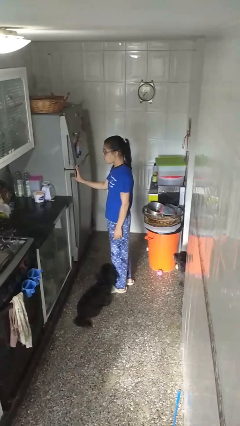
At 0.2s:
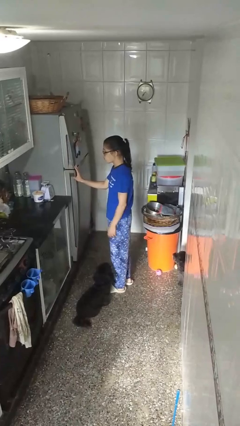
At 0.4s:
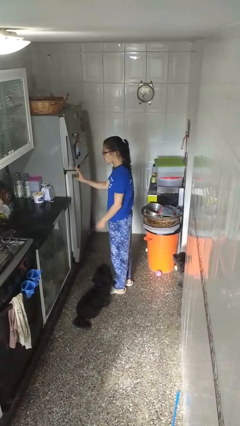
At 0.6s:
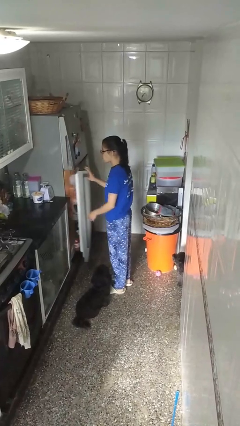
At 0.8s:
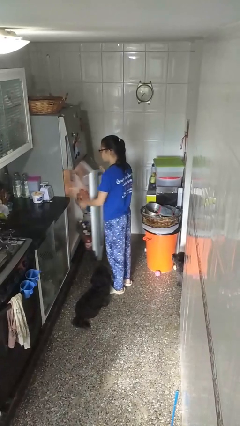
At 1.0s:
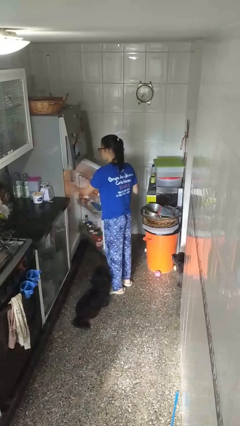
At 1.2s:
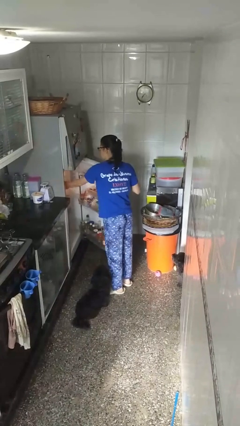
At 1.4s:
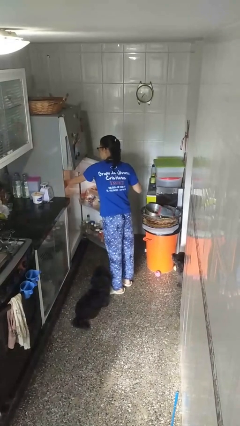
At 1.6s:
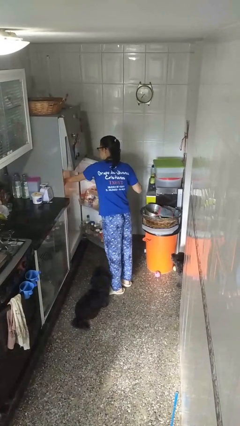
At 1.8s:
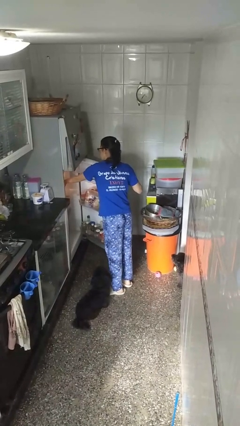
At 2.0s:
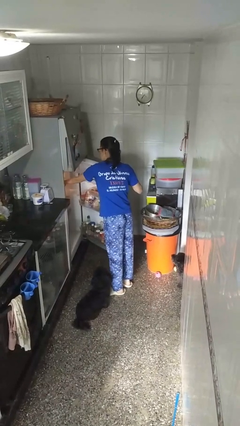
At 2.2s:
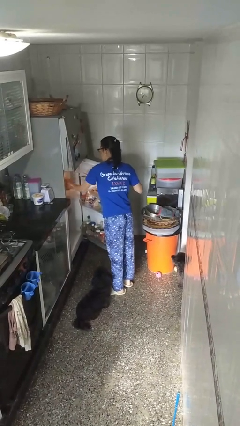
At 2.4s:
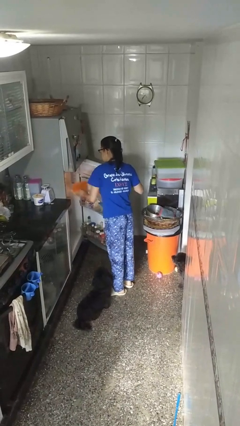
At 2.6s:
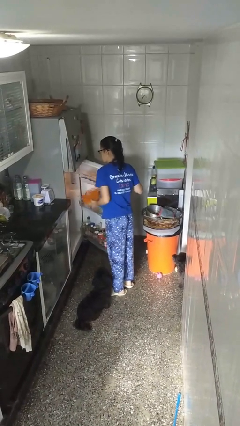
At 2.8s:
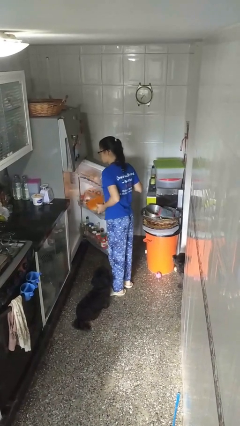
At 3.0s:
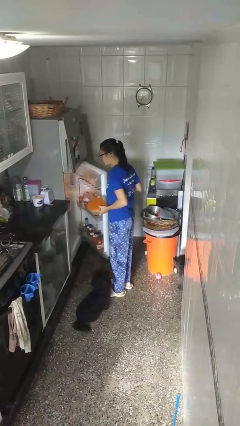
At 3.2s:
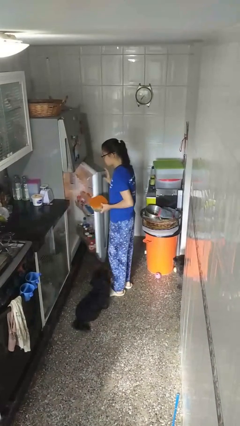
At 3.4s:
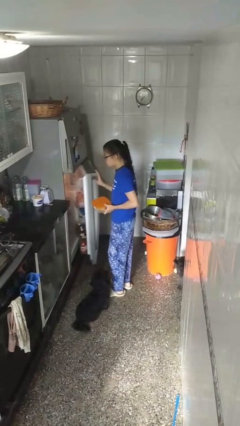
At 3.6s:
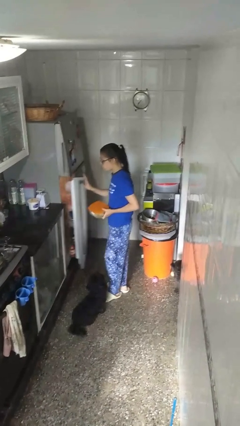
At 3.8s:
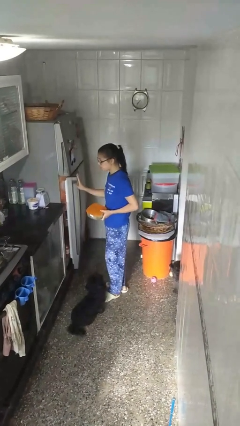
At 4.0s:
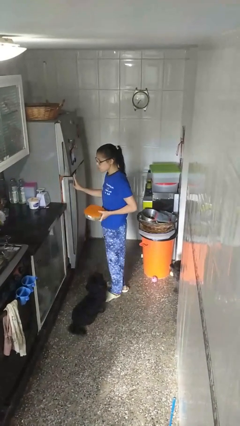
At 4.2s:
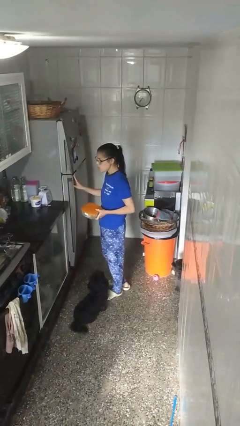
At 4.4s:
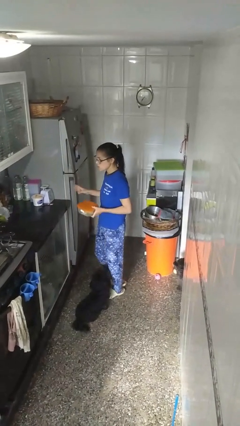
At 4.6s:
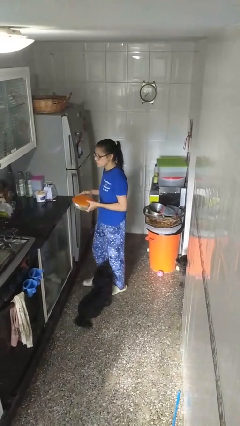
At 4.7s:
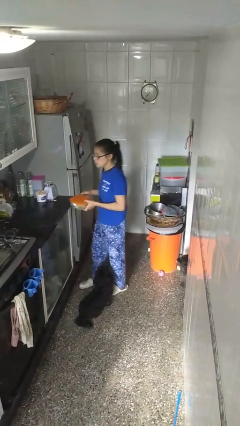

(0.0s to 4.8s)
person takes object from refrigerator

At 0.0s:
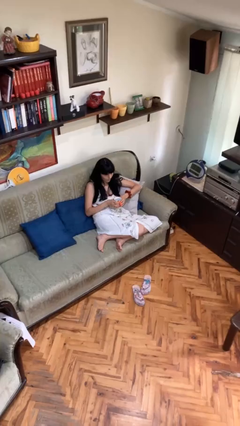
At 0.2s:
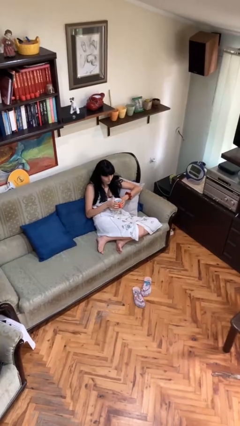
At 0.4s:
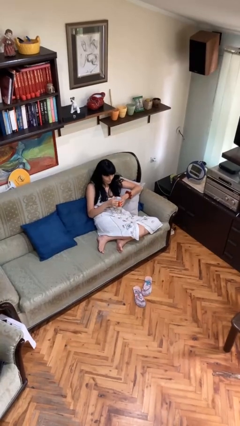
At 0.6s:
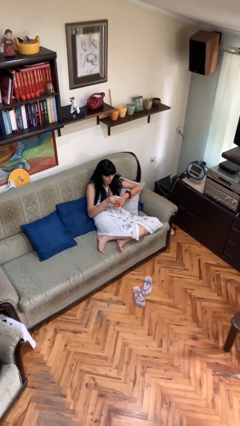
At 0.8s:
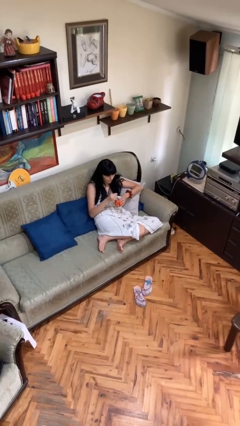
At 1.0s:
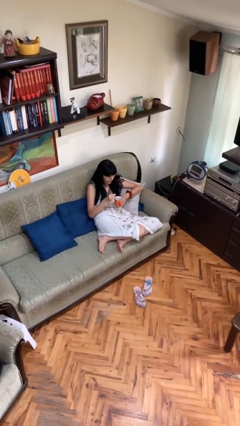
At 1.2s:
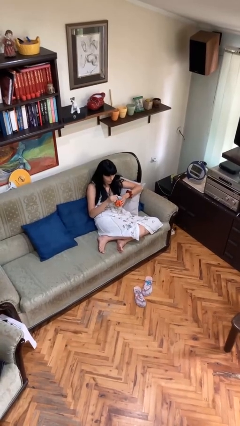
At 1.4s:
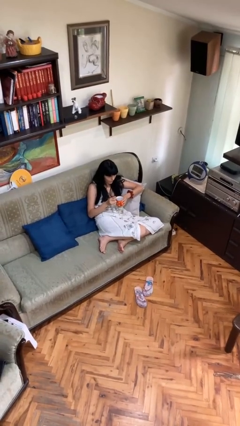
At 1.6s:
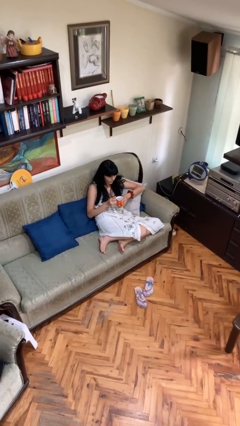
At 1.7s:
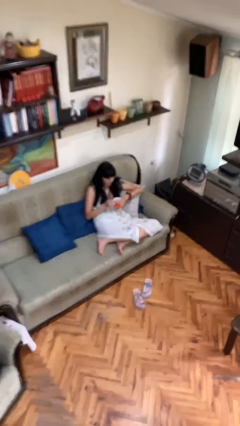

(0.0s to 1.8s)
person stirs mug

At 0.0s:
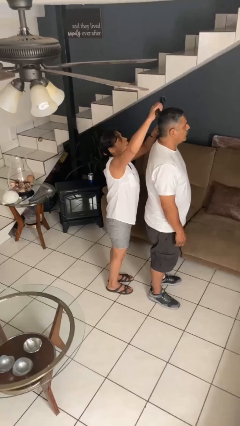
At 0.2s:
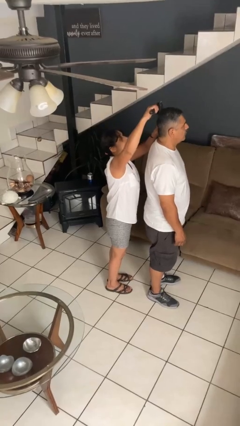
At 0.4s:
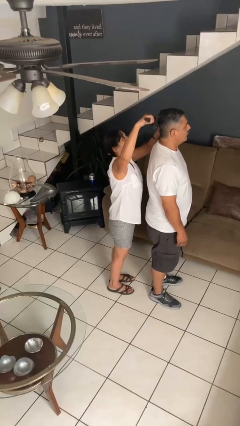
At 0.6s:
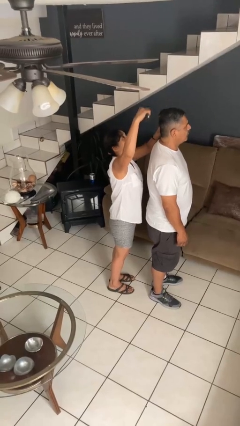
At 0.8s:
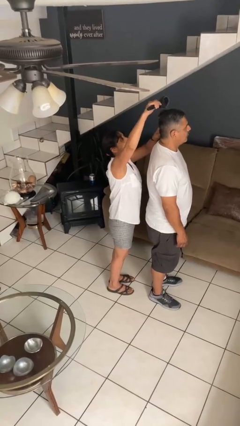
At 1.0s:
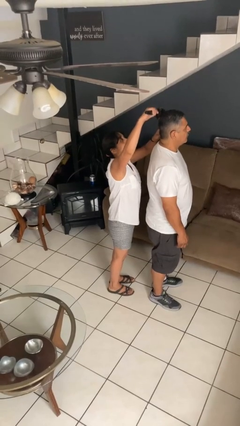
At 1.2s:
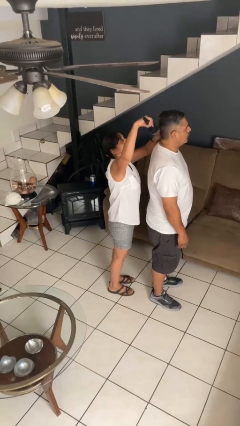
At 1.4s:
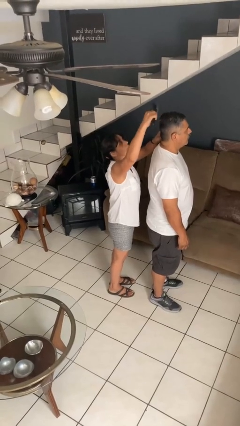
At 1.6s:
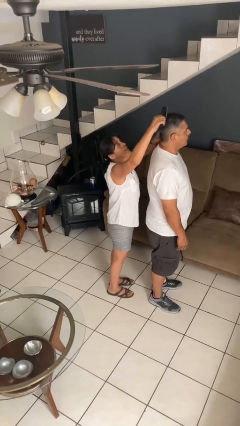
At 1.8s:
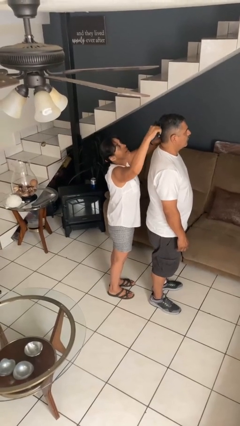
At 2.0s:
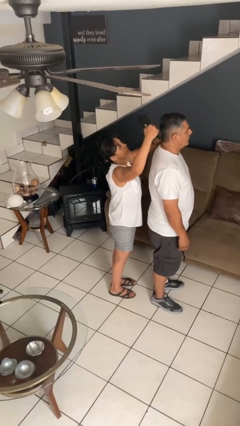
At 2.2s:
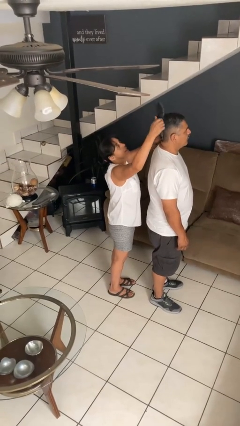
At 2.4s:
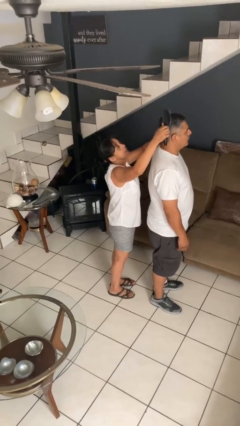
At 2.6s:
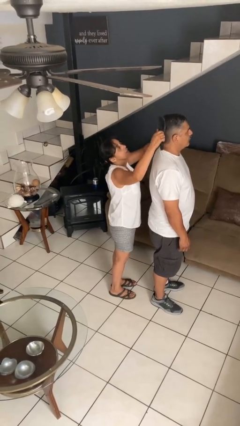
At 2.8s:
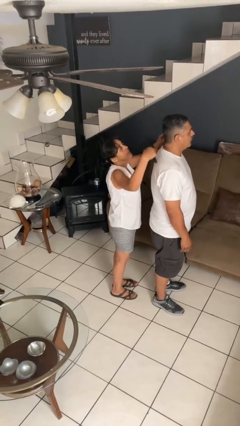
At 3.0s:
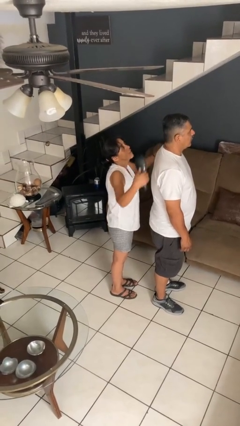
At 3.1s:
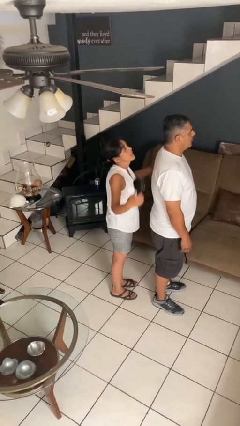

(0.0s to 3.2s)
person brushes hair of person

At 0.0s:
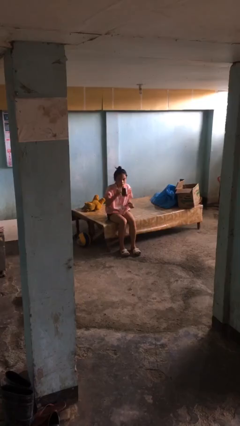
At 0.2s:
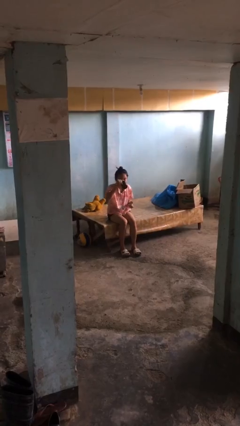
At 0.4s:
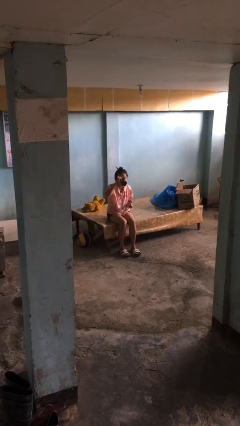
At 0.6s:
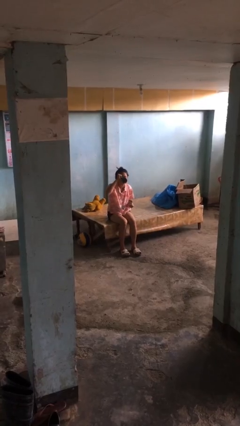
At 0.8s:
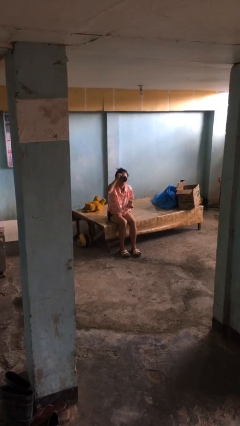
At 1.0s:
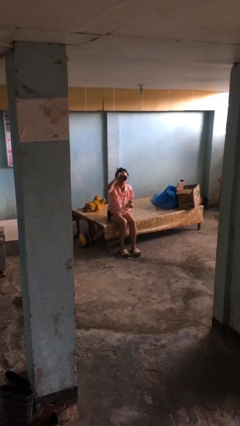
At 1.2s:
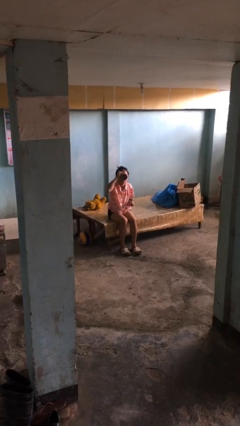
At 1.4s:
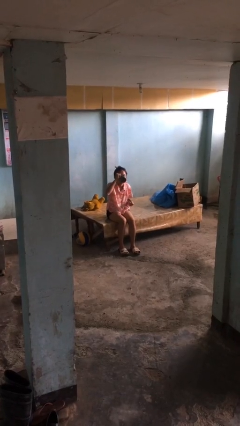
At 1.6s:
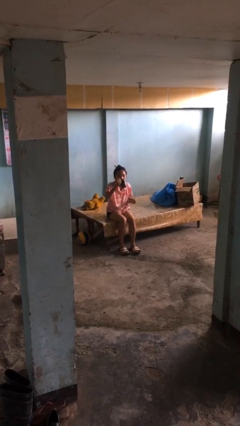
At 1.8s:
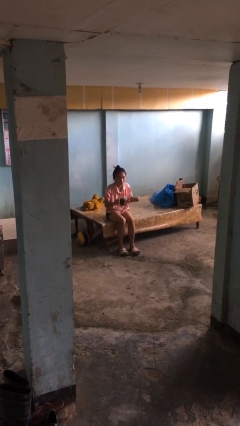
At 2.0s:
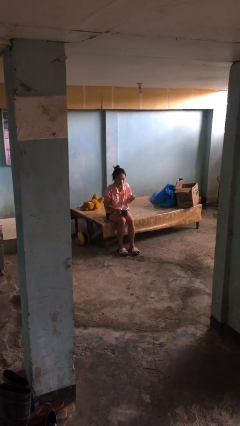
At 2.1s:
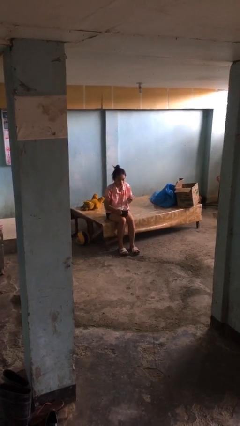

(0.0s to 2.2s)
person drinks from mug

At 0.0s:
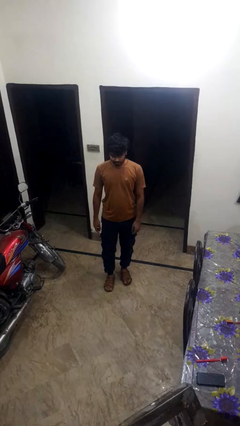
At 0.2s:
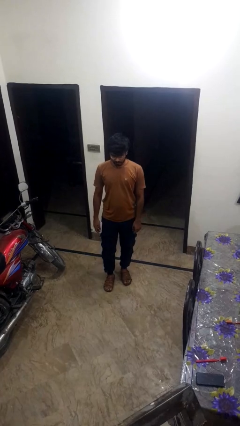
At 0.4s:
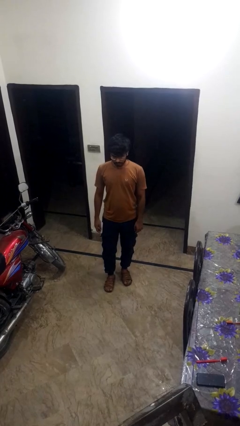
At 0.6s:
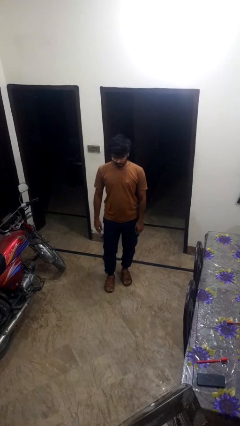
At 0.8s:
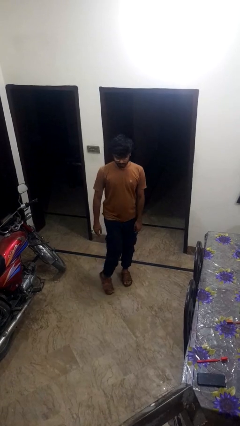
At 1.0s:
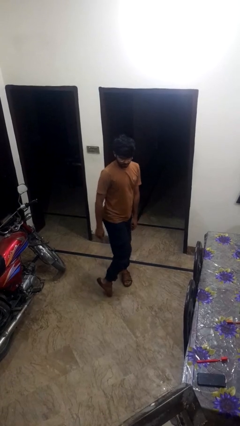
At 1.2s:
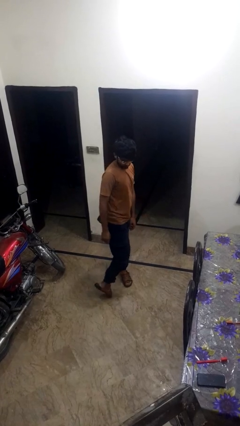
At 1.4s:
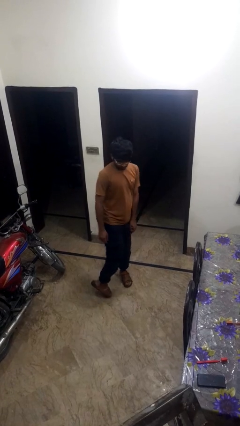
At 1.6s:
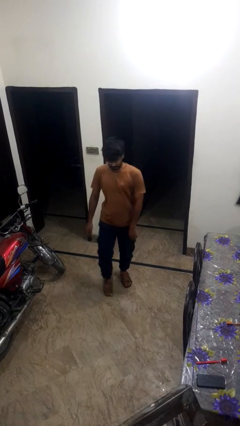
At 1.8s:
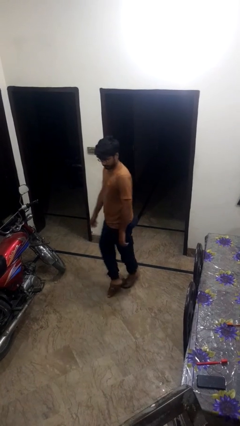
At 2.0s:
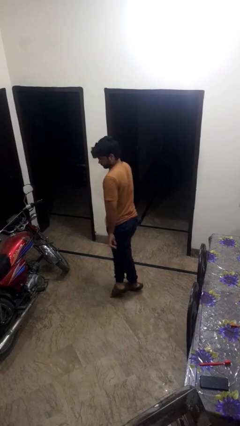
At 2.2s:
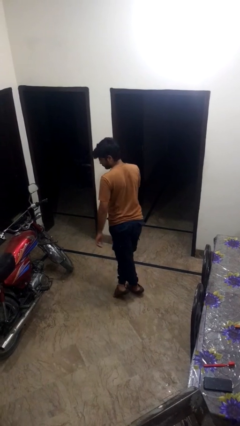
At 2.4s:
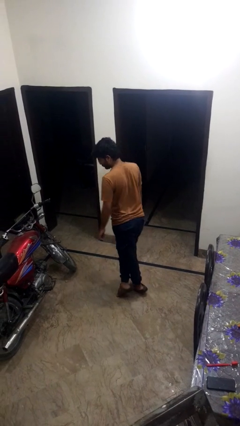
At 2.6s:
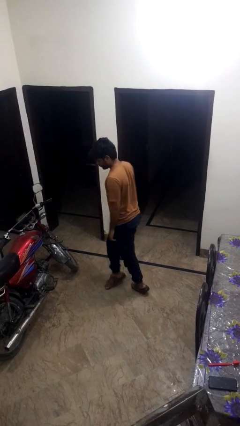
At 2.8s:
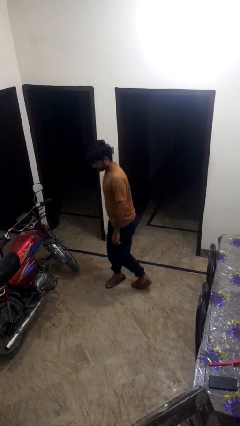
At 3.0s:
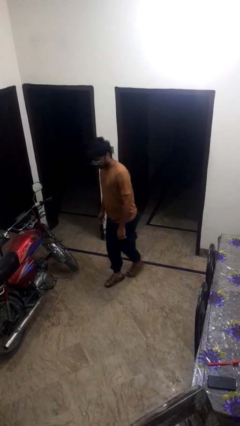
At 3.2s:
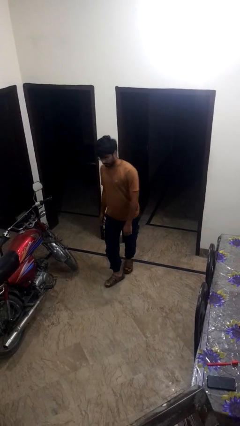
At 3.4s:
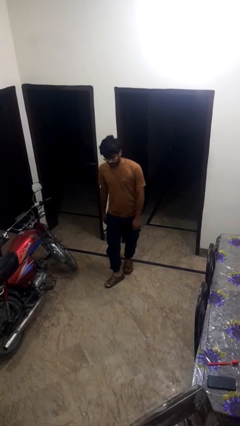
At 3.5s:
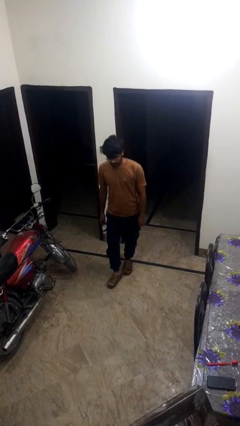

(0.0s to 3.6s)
person twirls

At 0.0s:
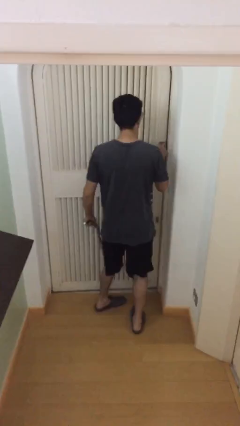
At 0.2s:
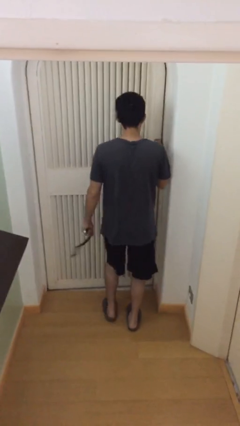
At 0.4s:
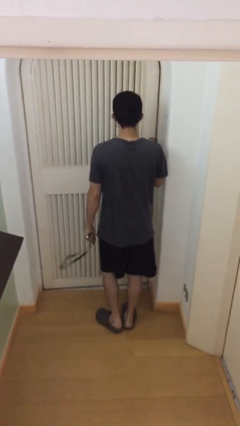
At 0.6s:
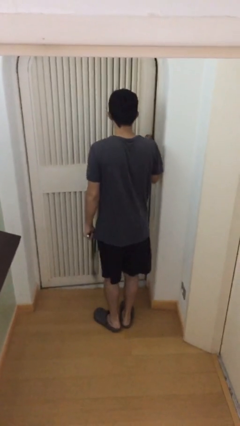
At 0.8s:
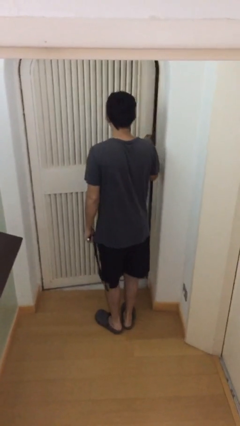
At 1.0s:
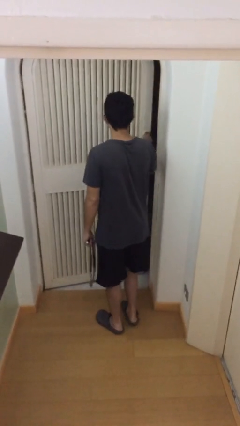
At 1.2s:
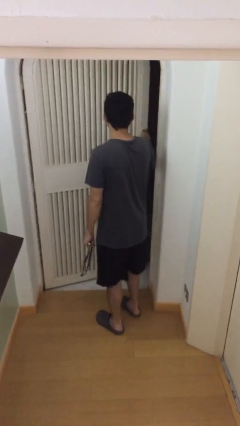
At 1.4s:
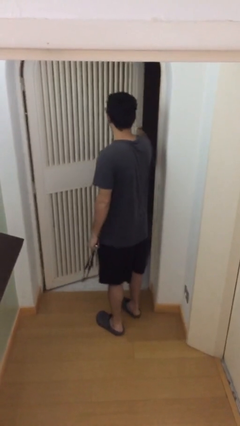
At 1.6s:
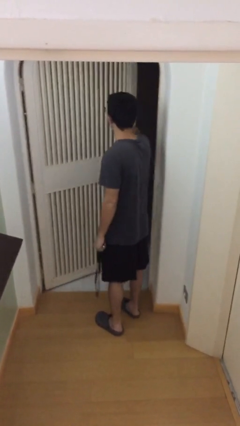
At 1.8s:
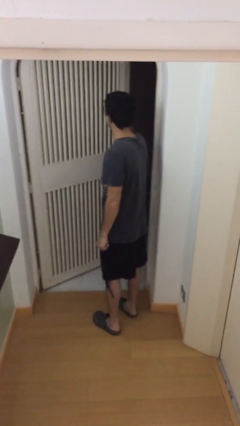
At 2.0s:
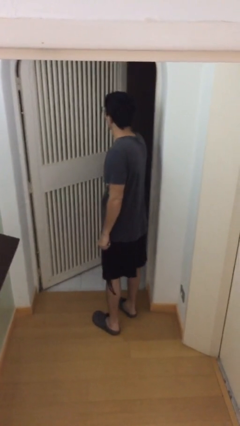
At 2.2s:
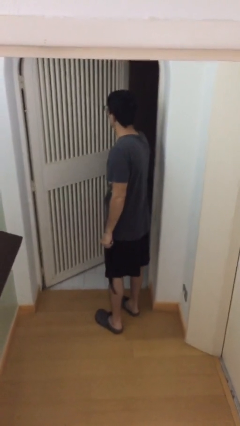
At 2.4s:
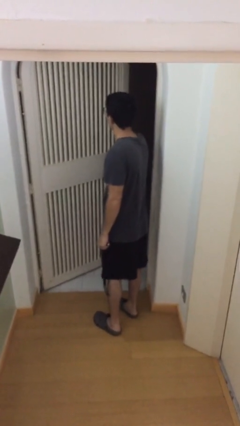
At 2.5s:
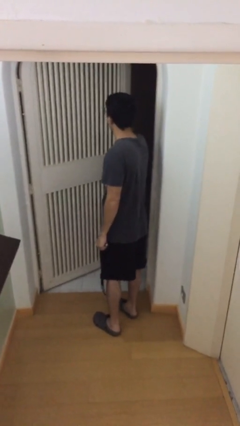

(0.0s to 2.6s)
person opens facility door
